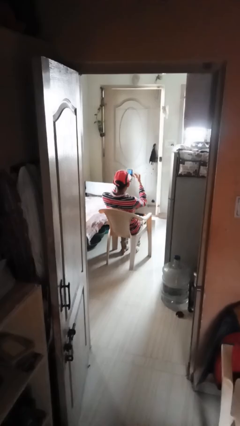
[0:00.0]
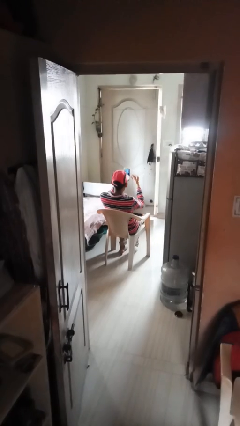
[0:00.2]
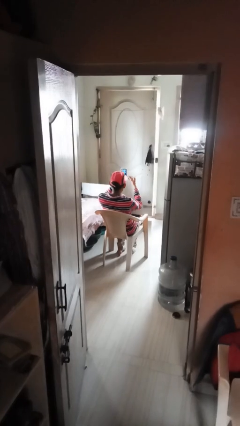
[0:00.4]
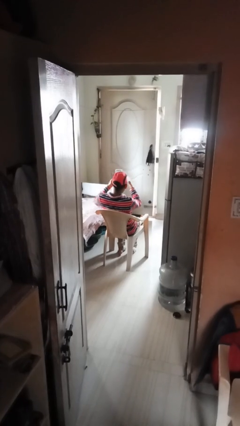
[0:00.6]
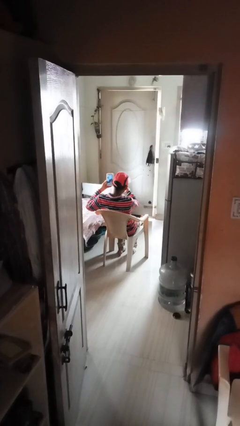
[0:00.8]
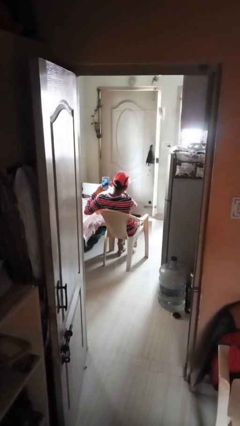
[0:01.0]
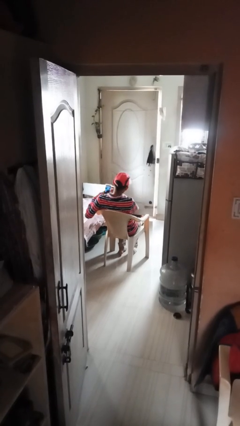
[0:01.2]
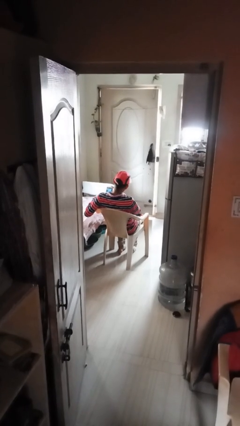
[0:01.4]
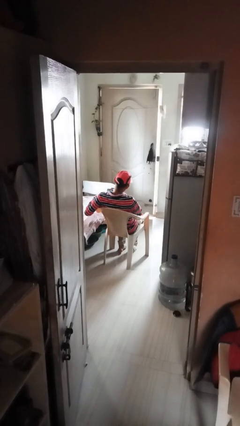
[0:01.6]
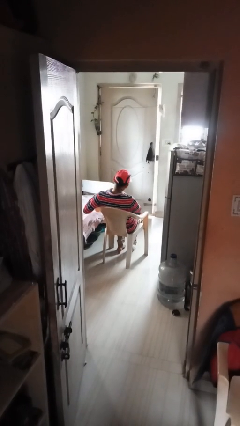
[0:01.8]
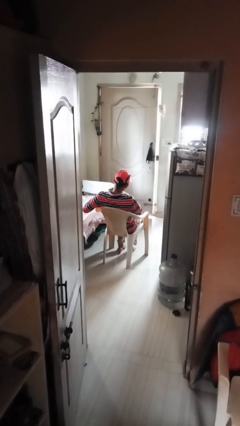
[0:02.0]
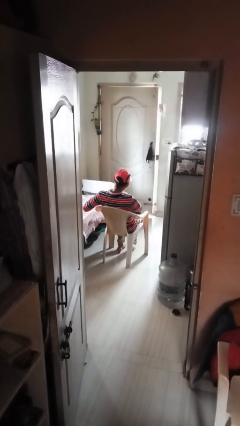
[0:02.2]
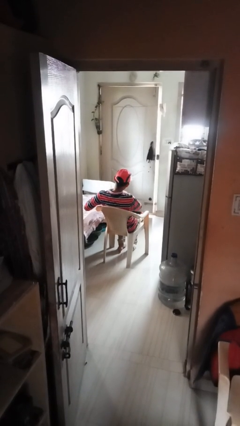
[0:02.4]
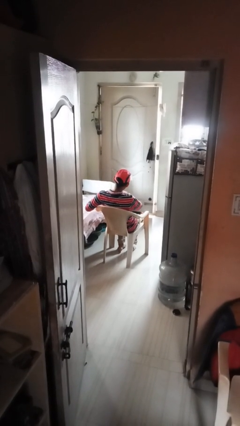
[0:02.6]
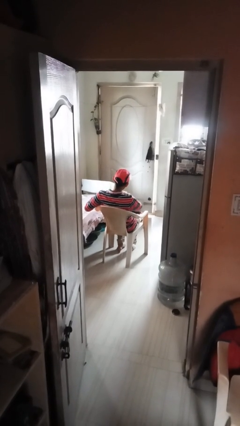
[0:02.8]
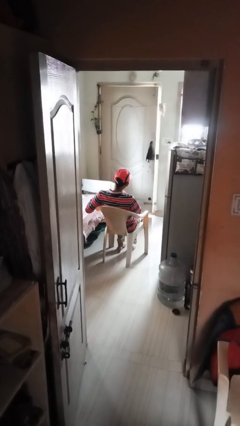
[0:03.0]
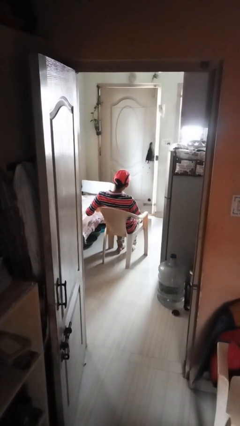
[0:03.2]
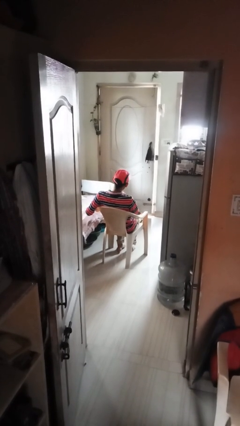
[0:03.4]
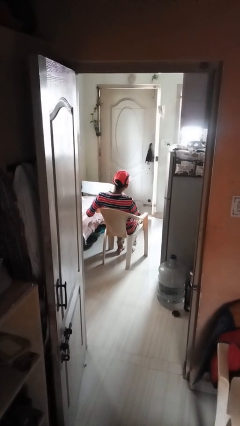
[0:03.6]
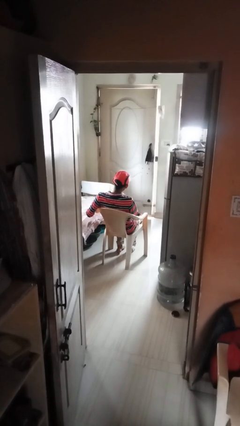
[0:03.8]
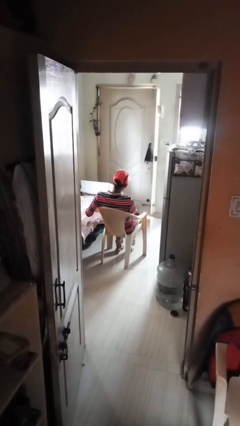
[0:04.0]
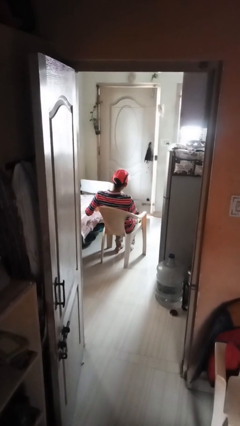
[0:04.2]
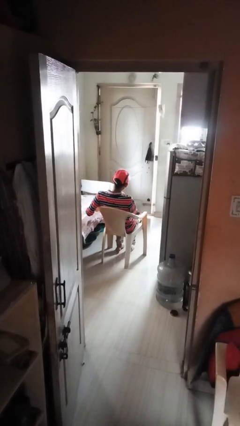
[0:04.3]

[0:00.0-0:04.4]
person puts phone into pocket

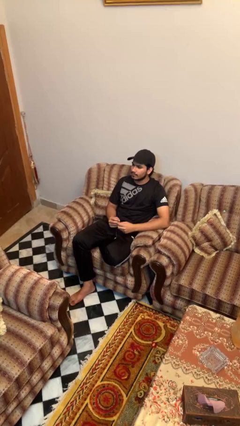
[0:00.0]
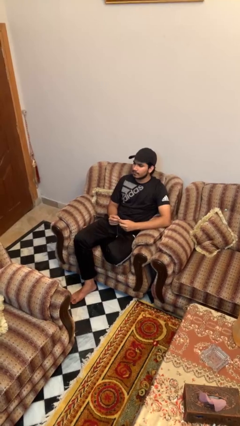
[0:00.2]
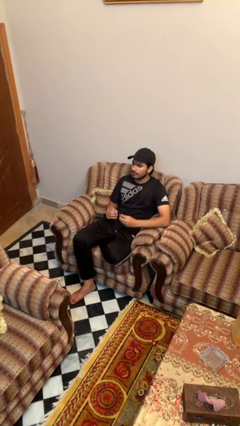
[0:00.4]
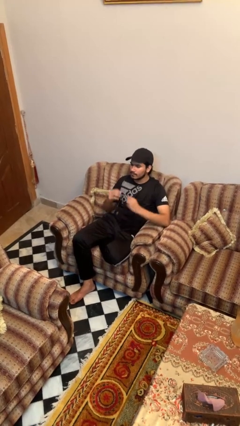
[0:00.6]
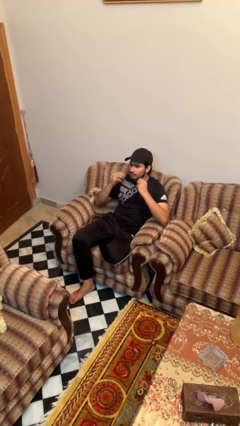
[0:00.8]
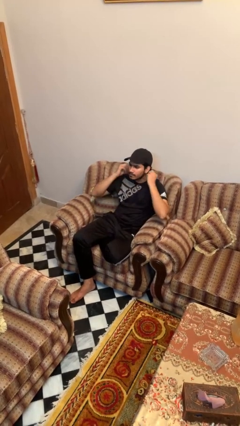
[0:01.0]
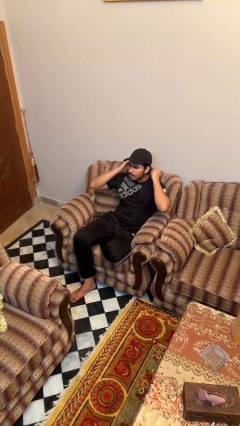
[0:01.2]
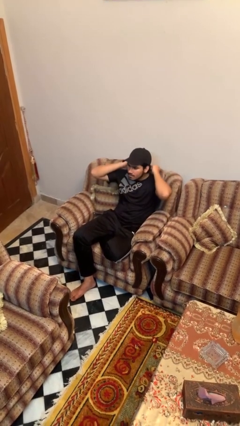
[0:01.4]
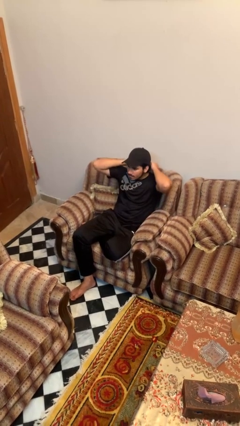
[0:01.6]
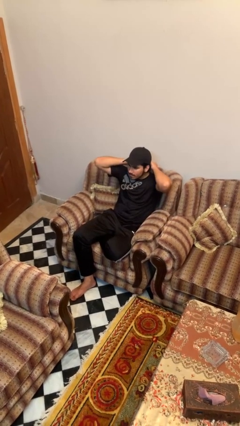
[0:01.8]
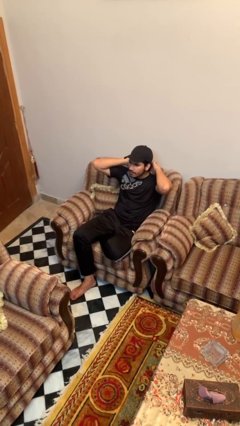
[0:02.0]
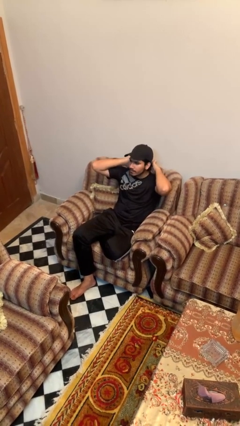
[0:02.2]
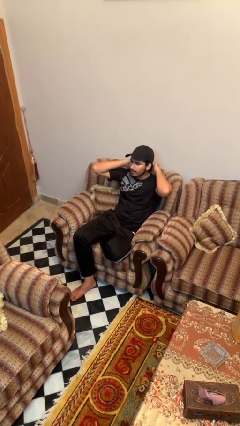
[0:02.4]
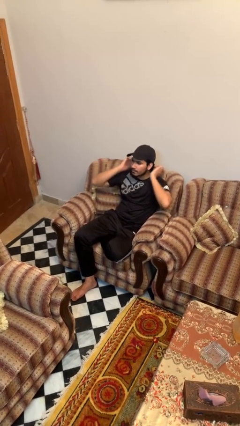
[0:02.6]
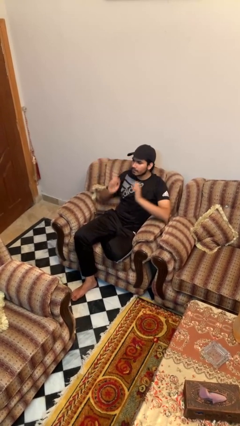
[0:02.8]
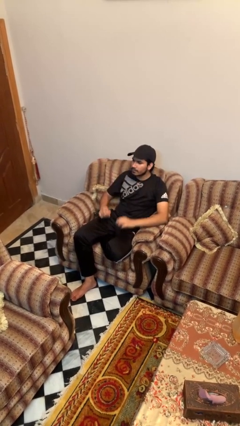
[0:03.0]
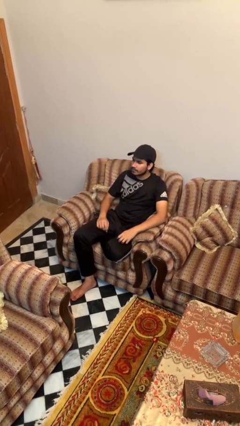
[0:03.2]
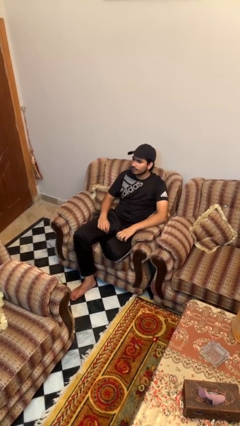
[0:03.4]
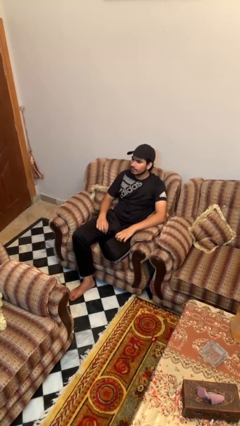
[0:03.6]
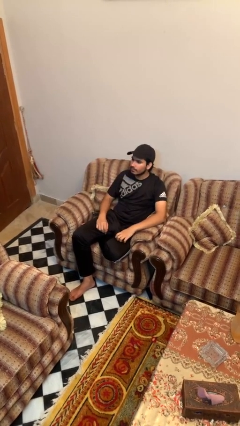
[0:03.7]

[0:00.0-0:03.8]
person puts on necklace

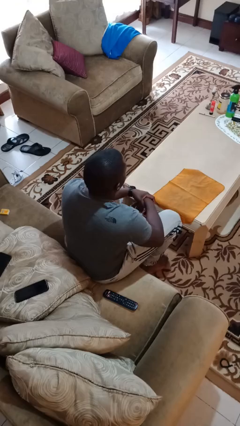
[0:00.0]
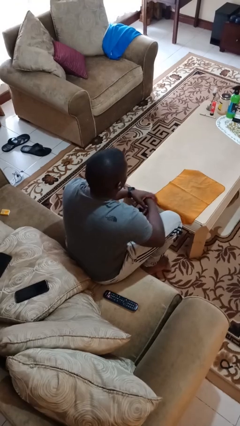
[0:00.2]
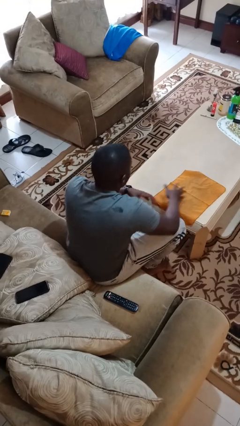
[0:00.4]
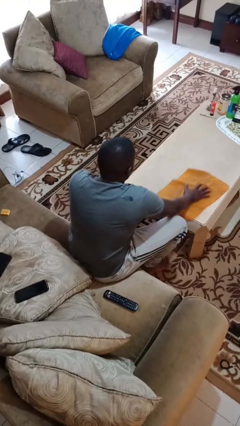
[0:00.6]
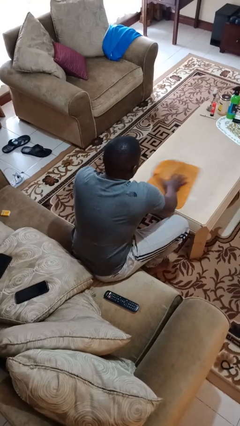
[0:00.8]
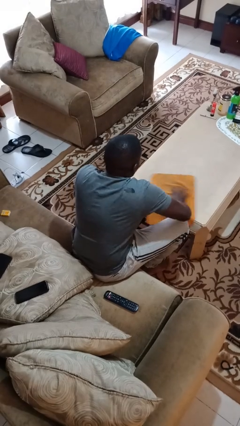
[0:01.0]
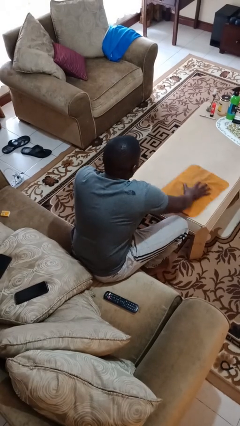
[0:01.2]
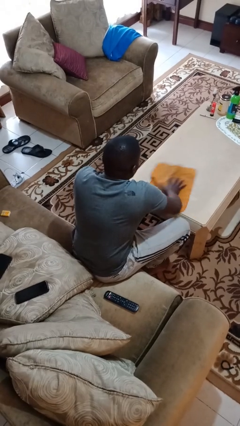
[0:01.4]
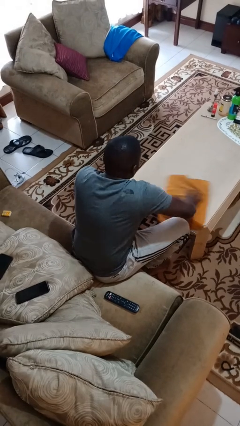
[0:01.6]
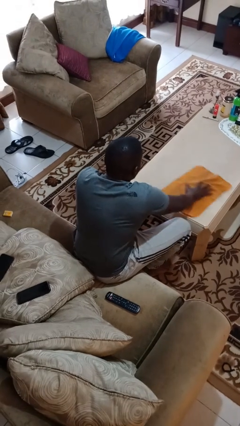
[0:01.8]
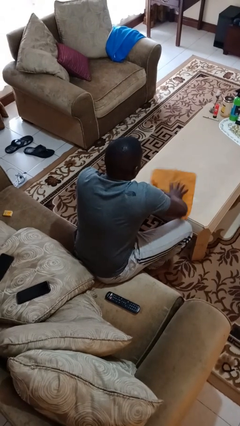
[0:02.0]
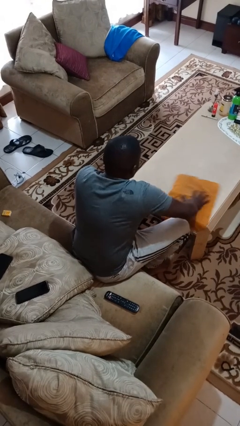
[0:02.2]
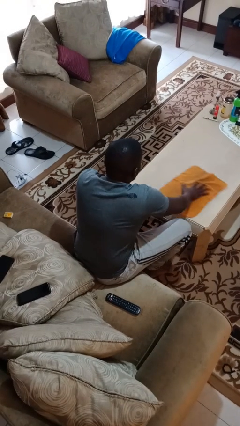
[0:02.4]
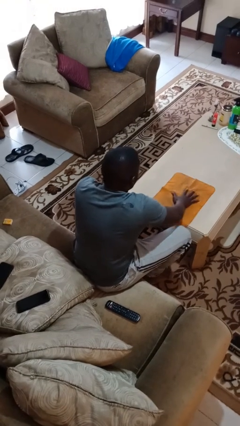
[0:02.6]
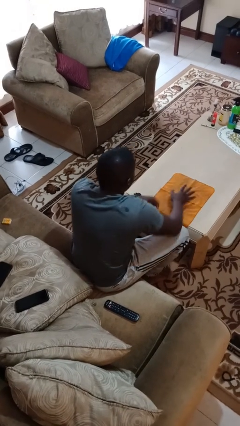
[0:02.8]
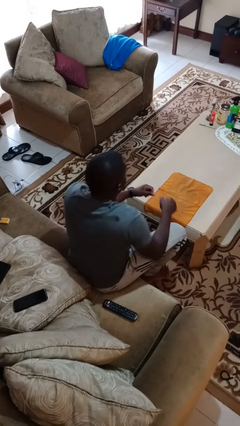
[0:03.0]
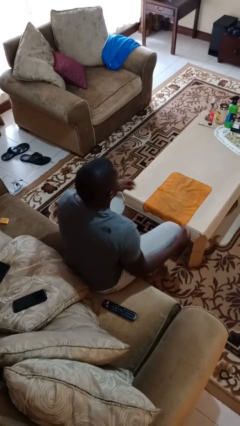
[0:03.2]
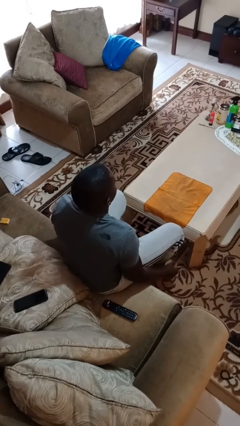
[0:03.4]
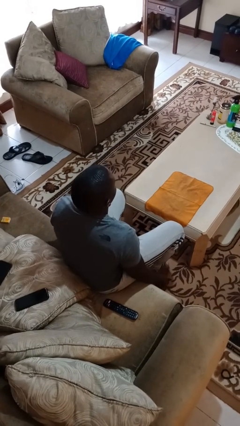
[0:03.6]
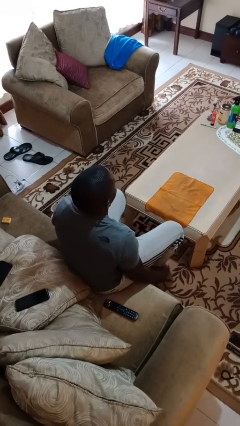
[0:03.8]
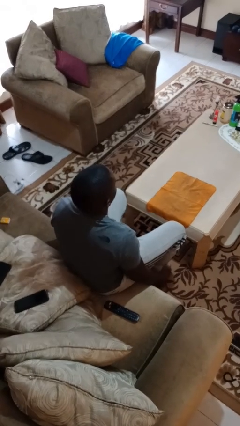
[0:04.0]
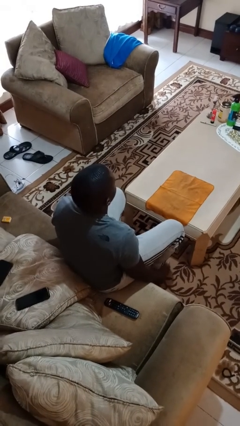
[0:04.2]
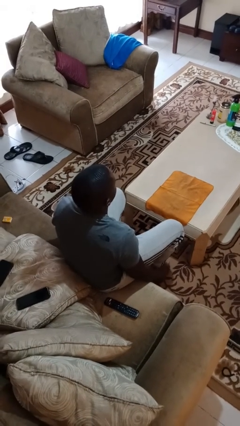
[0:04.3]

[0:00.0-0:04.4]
person cleans table with rag

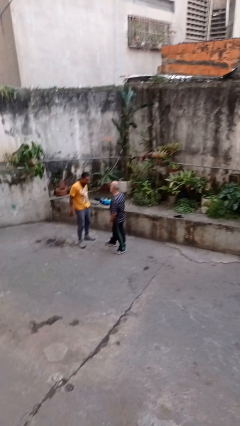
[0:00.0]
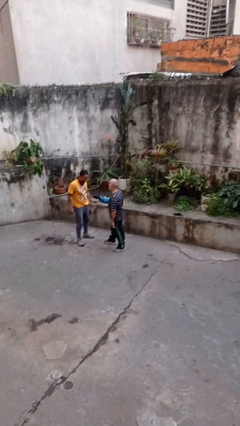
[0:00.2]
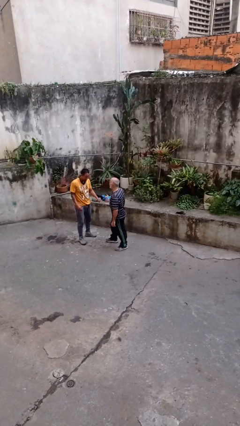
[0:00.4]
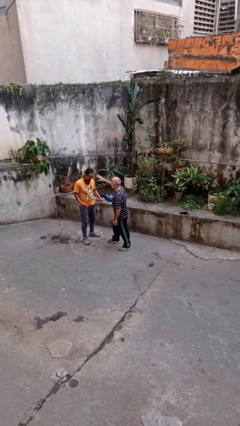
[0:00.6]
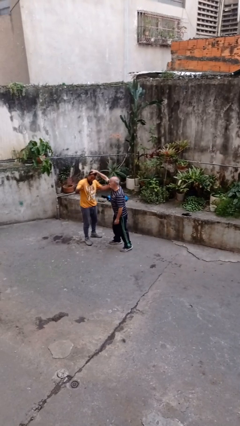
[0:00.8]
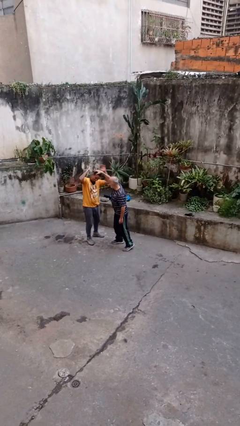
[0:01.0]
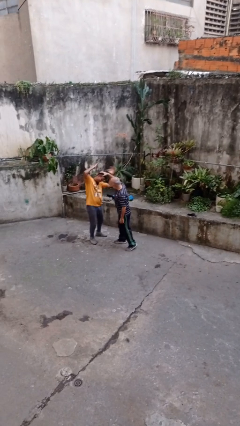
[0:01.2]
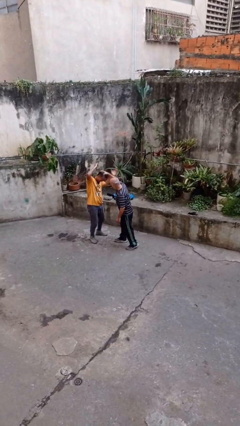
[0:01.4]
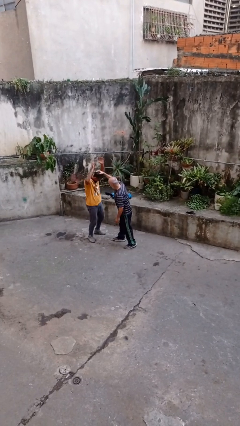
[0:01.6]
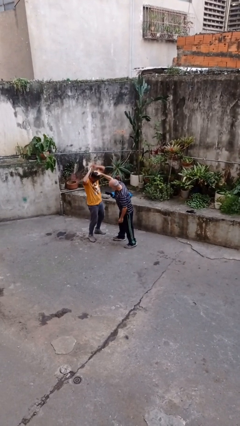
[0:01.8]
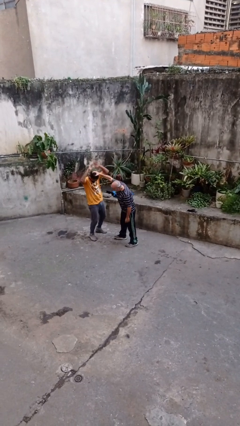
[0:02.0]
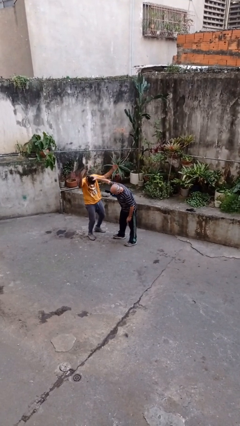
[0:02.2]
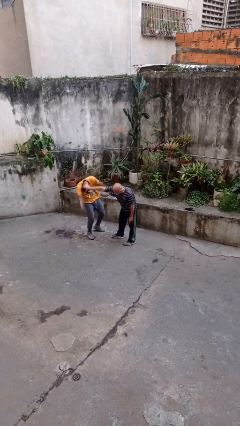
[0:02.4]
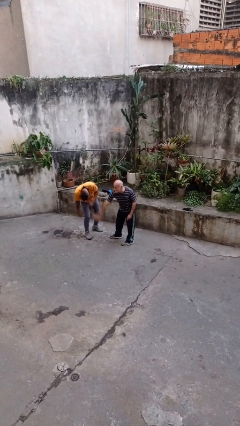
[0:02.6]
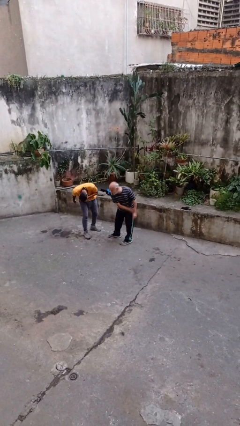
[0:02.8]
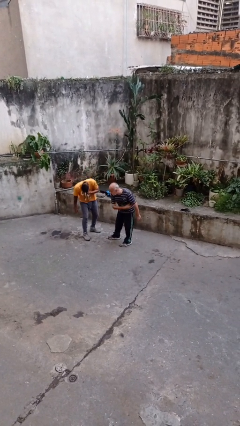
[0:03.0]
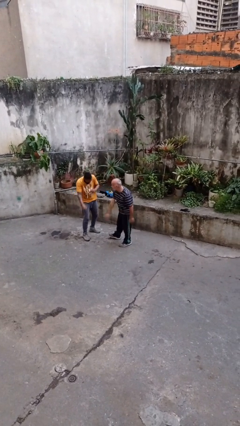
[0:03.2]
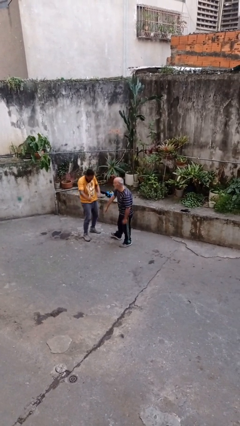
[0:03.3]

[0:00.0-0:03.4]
person grabs person by hair

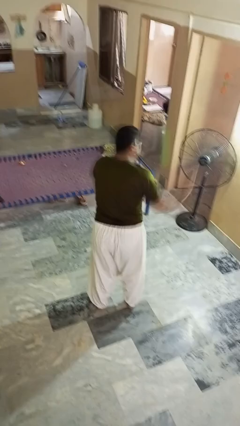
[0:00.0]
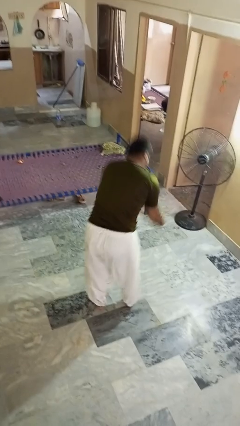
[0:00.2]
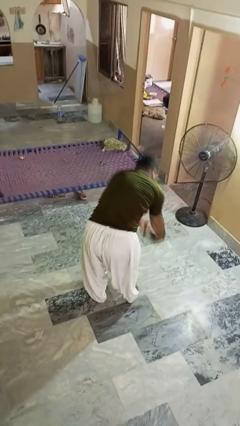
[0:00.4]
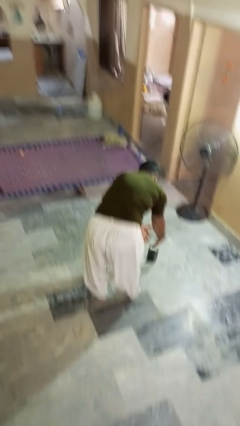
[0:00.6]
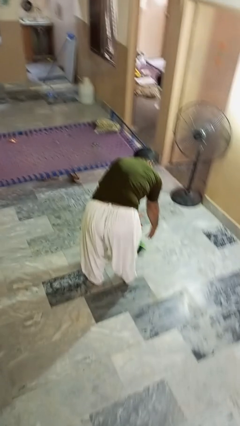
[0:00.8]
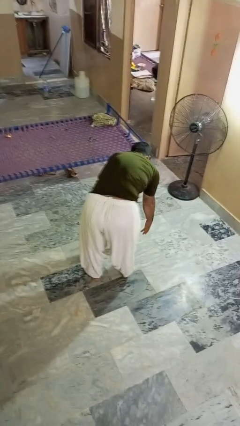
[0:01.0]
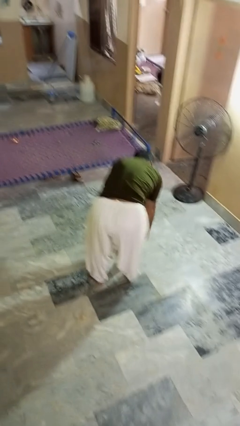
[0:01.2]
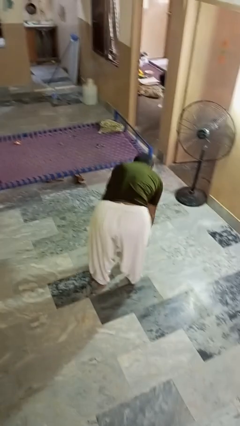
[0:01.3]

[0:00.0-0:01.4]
person catches dropped object
